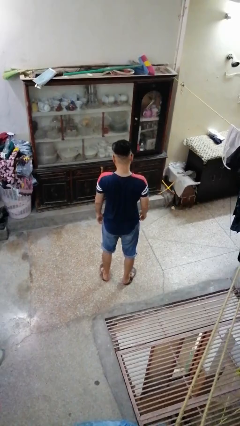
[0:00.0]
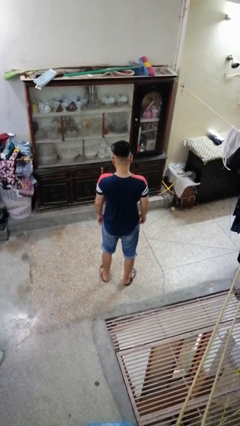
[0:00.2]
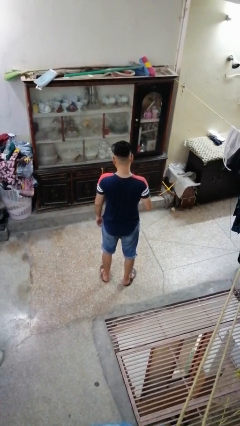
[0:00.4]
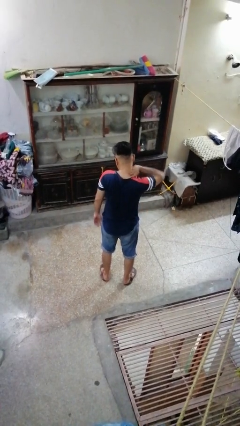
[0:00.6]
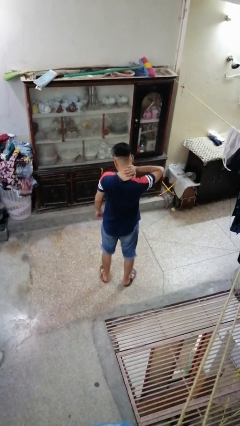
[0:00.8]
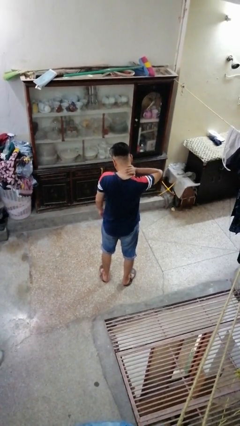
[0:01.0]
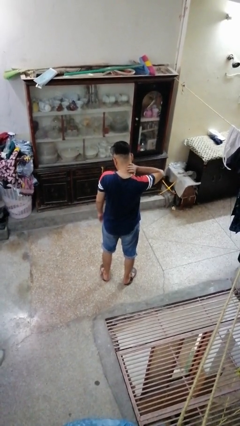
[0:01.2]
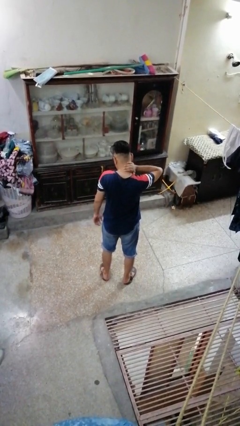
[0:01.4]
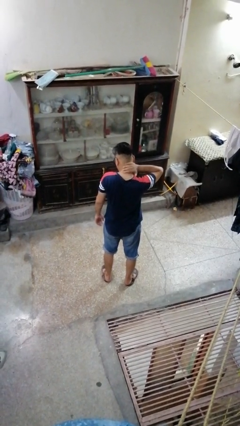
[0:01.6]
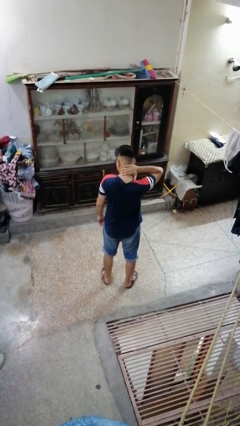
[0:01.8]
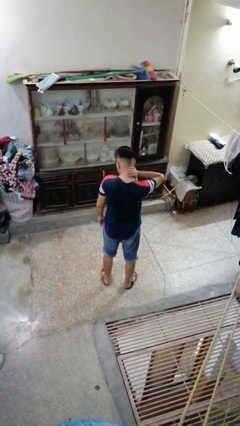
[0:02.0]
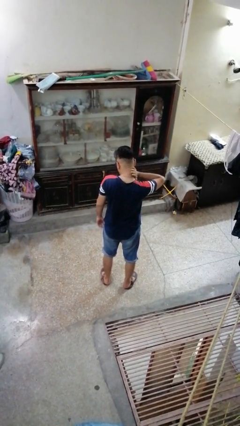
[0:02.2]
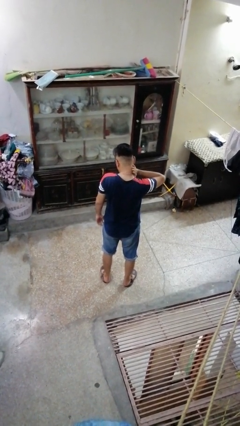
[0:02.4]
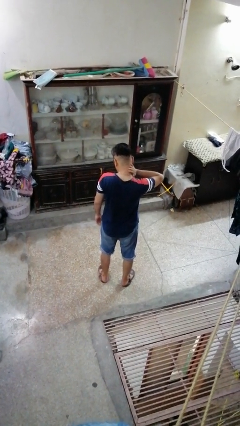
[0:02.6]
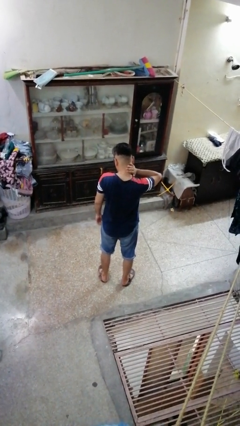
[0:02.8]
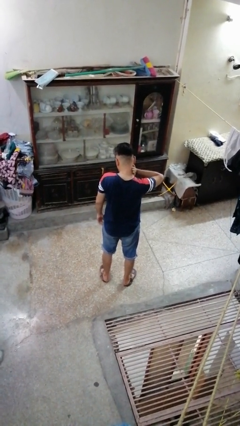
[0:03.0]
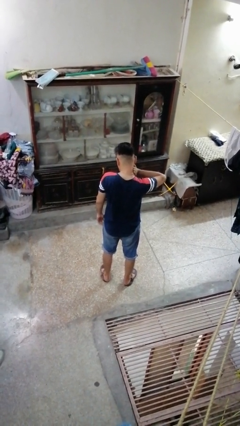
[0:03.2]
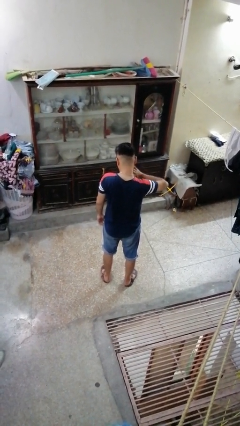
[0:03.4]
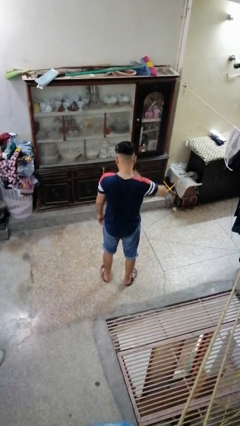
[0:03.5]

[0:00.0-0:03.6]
person swats bug

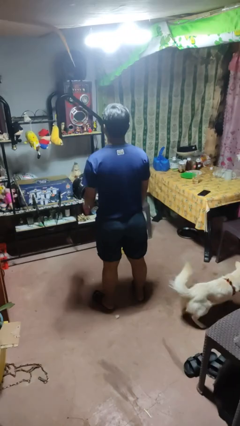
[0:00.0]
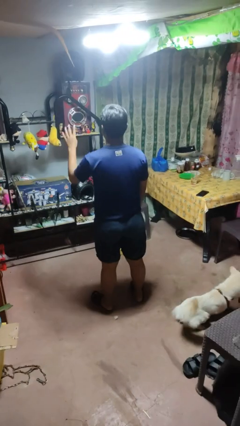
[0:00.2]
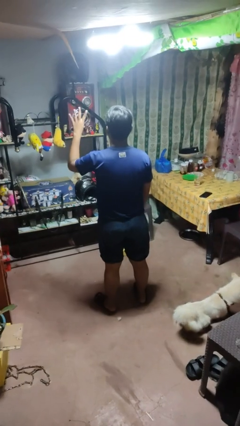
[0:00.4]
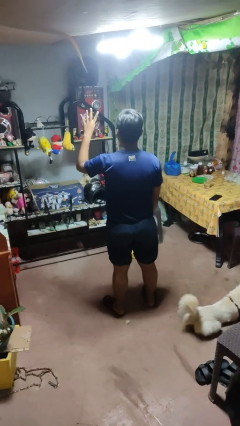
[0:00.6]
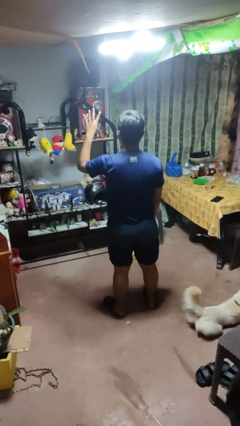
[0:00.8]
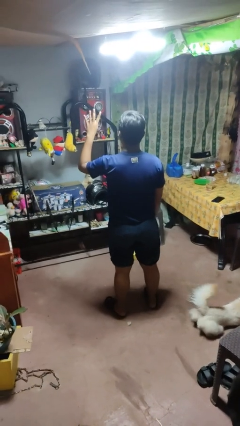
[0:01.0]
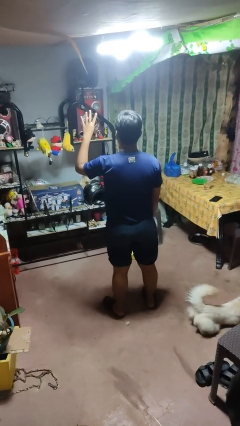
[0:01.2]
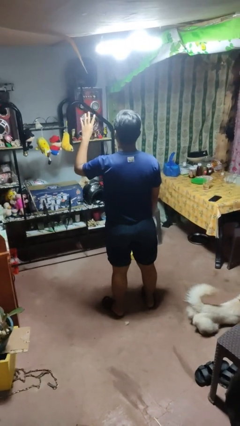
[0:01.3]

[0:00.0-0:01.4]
person gestures number four

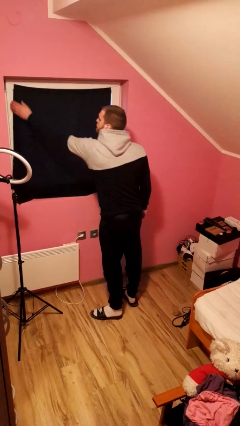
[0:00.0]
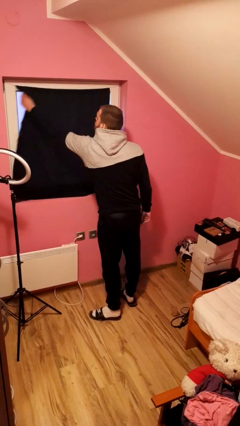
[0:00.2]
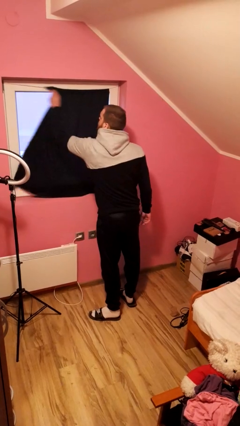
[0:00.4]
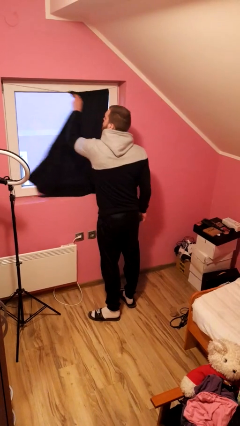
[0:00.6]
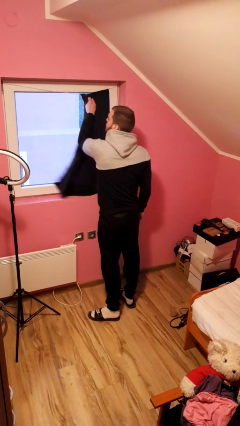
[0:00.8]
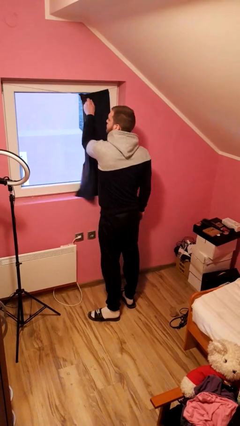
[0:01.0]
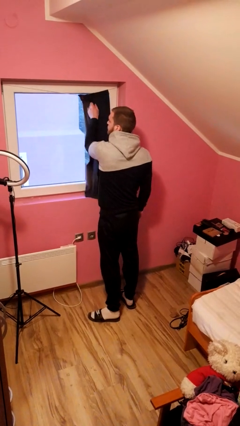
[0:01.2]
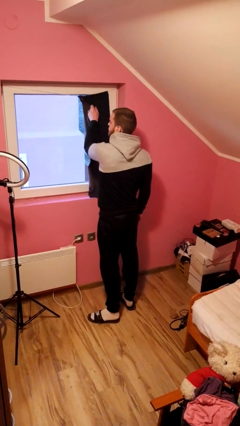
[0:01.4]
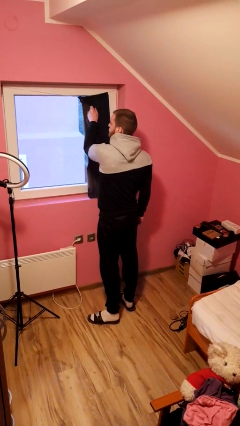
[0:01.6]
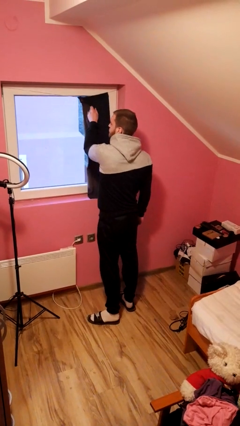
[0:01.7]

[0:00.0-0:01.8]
person opens curtains

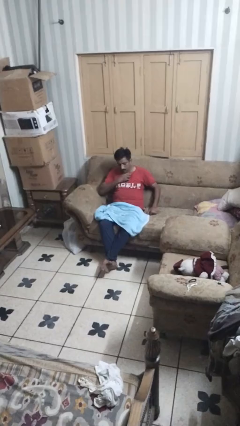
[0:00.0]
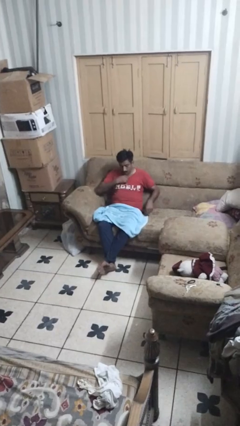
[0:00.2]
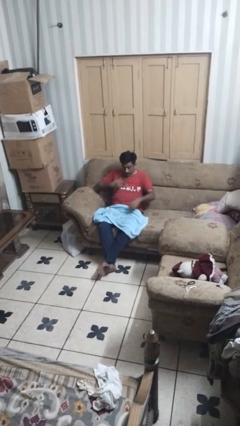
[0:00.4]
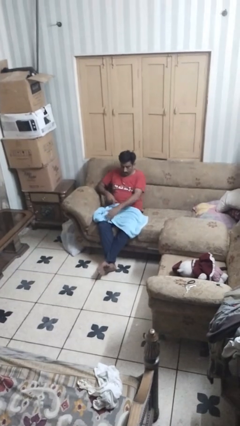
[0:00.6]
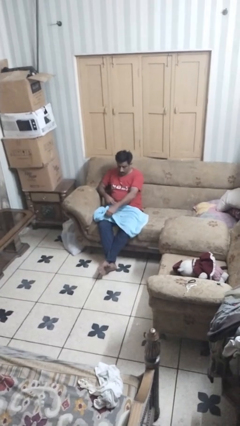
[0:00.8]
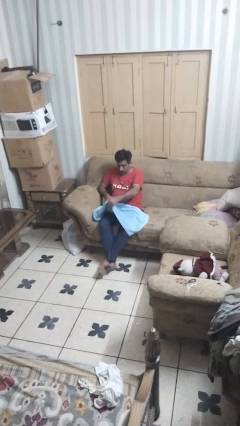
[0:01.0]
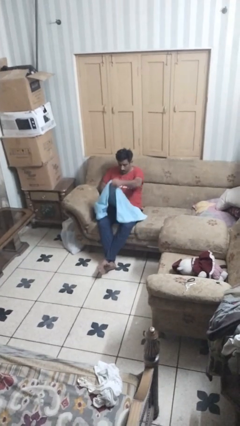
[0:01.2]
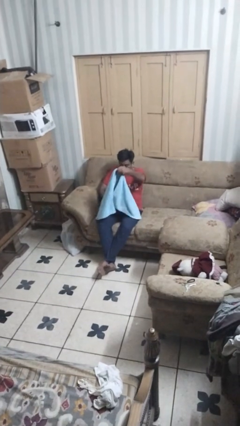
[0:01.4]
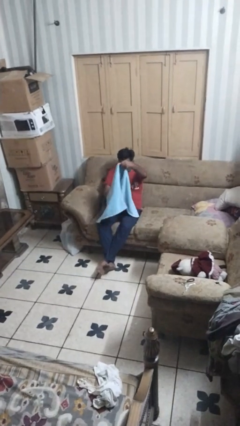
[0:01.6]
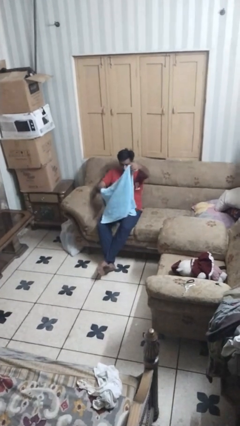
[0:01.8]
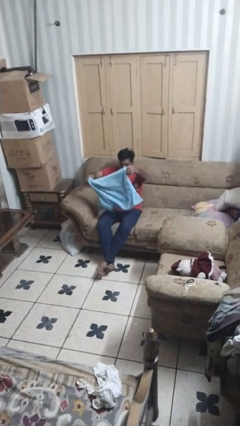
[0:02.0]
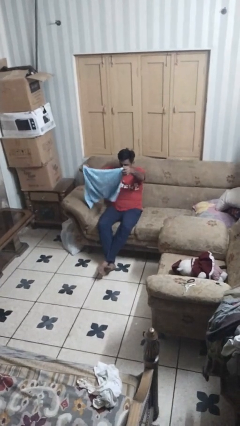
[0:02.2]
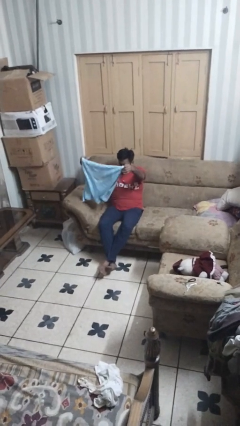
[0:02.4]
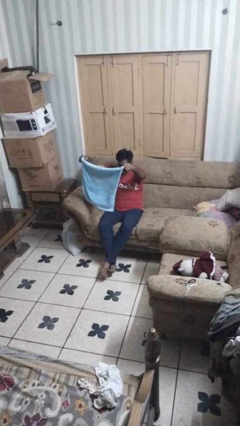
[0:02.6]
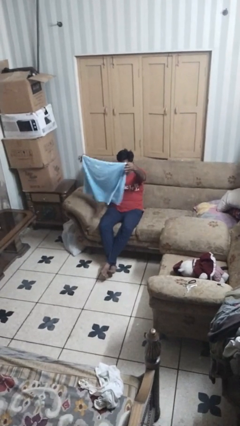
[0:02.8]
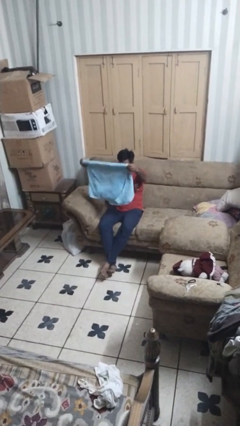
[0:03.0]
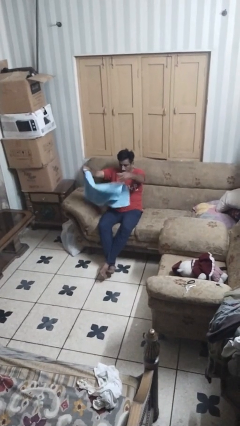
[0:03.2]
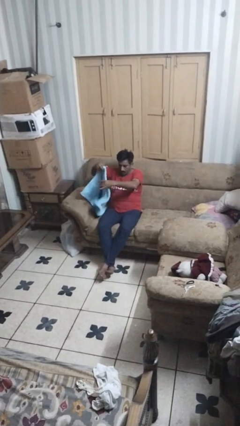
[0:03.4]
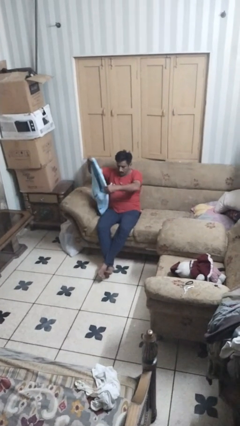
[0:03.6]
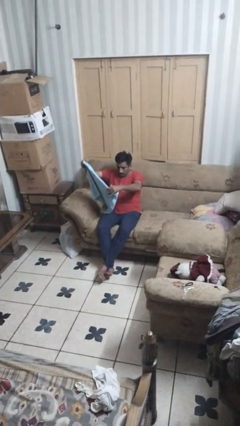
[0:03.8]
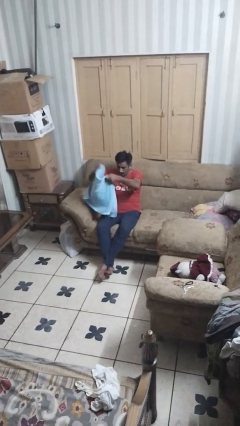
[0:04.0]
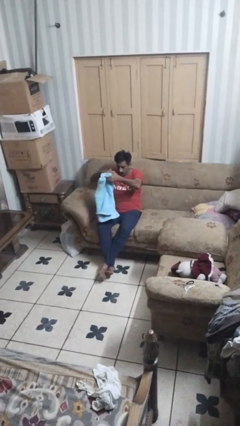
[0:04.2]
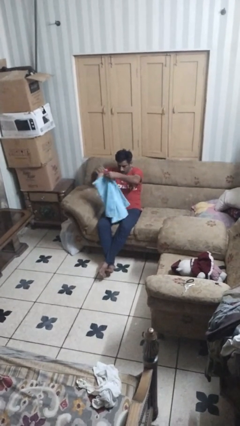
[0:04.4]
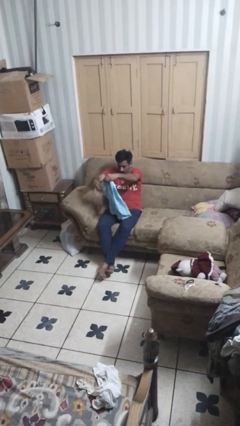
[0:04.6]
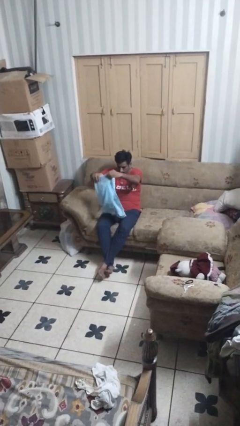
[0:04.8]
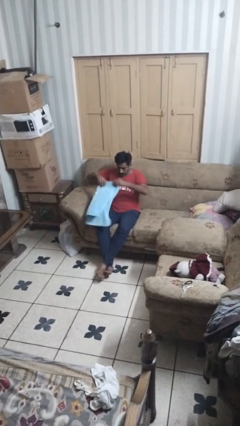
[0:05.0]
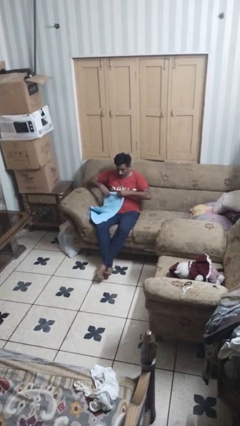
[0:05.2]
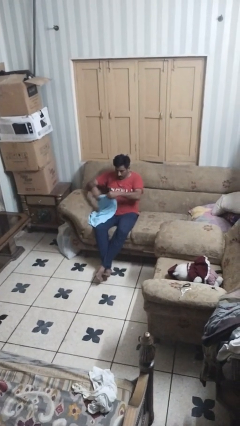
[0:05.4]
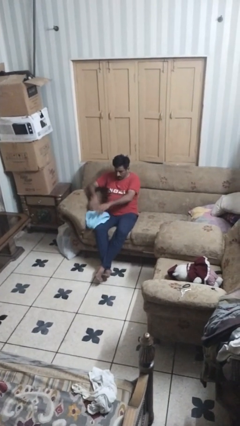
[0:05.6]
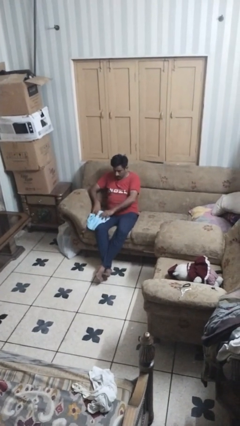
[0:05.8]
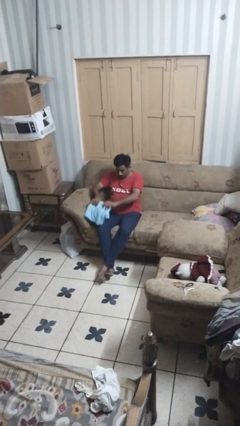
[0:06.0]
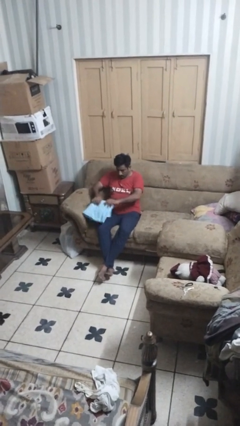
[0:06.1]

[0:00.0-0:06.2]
person folds towel

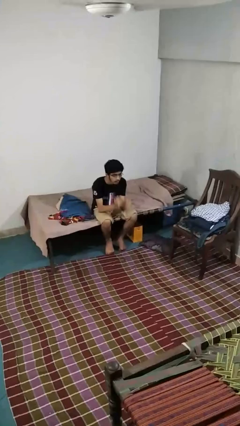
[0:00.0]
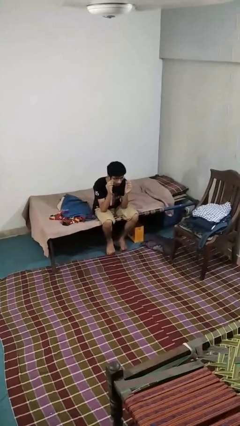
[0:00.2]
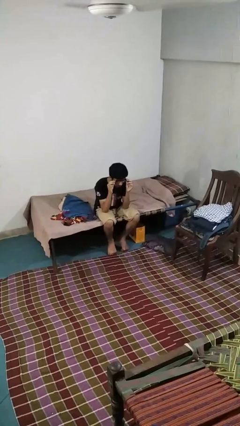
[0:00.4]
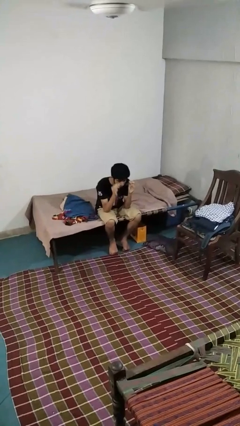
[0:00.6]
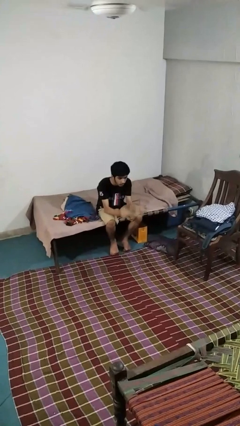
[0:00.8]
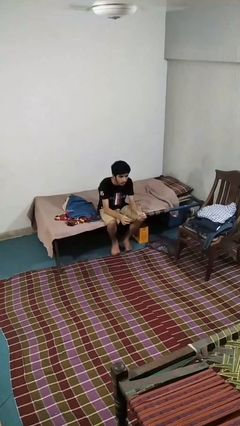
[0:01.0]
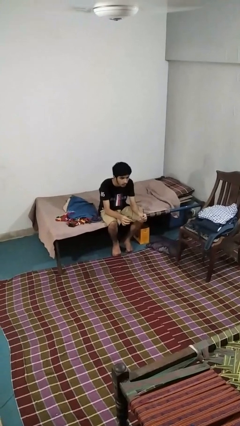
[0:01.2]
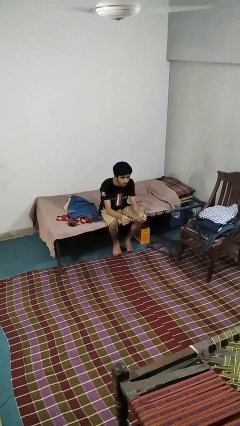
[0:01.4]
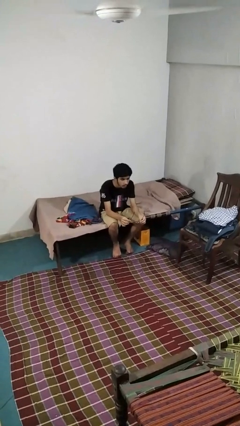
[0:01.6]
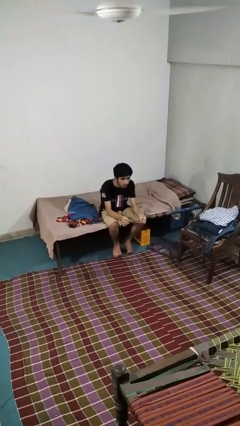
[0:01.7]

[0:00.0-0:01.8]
person takes off glasses

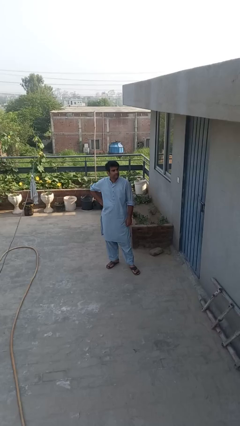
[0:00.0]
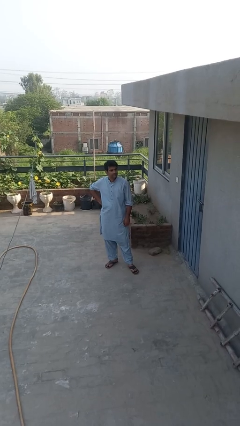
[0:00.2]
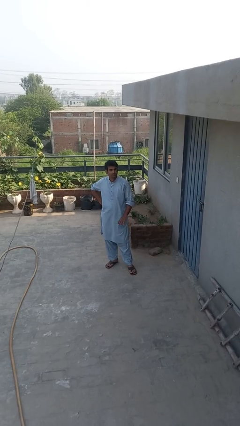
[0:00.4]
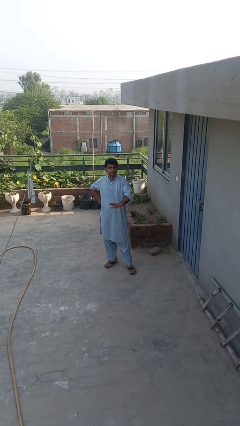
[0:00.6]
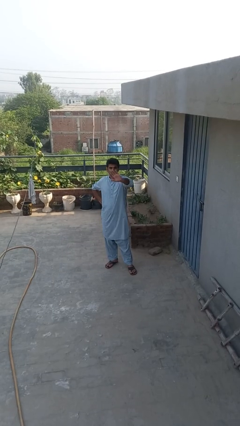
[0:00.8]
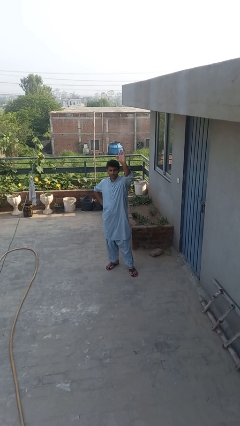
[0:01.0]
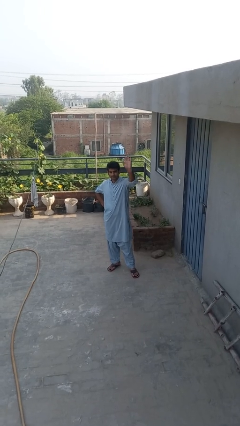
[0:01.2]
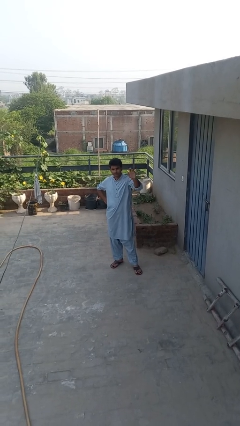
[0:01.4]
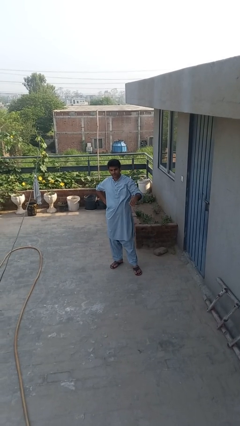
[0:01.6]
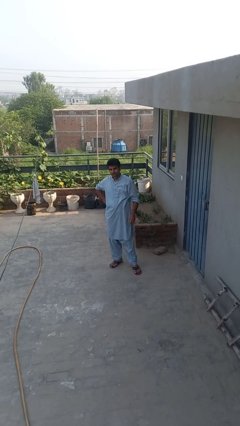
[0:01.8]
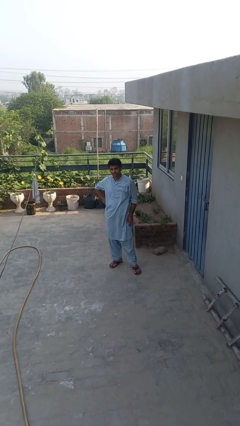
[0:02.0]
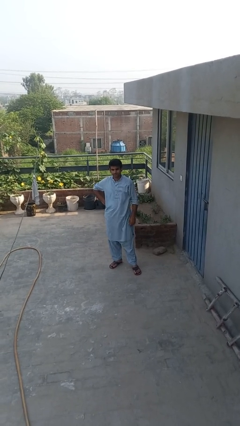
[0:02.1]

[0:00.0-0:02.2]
person gestures swipe up

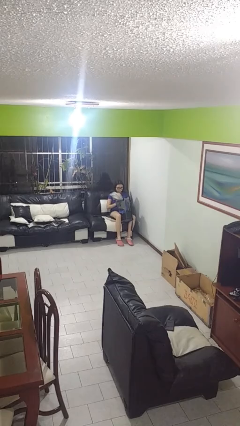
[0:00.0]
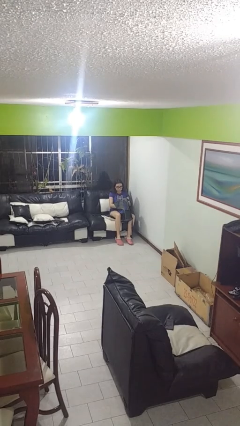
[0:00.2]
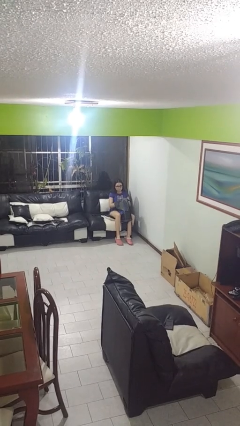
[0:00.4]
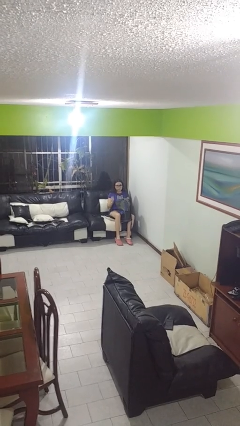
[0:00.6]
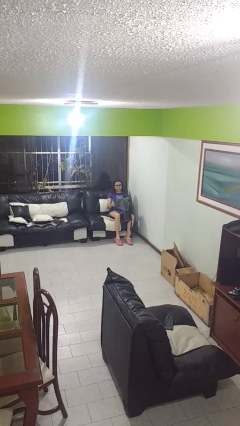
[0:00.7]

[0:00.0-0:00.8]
person puts object into backpack
